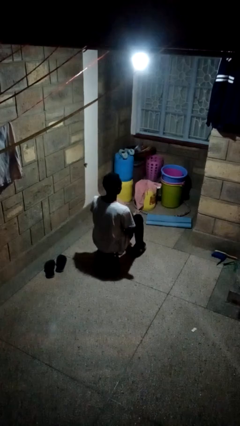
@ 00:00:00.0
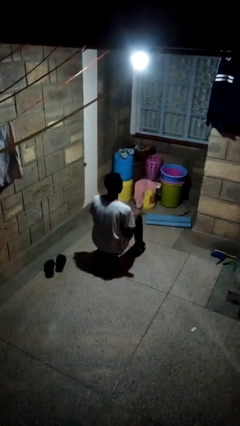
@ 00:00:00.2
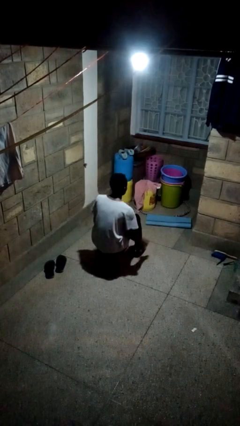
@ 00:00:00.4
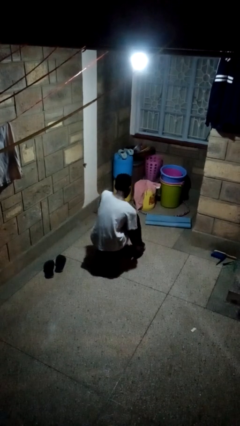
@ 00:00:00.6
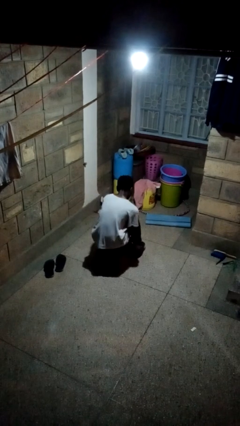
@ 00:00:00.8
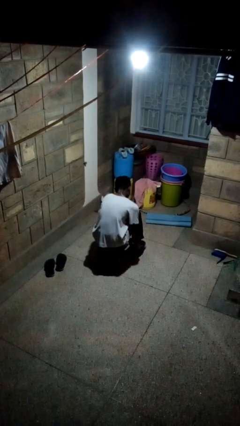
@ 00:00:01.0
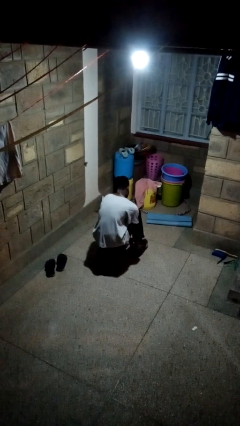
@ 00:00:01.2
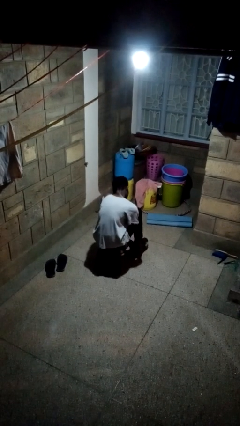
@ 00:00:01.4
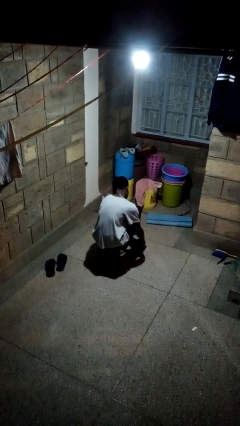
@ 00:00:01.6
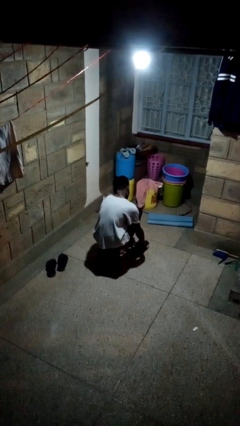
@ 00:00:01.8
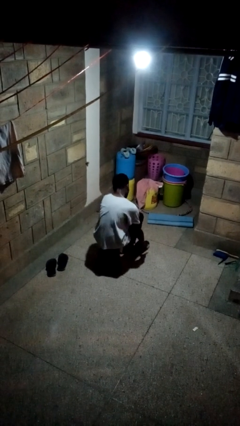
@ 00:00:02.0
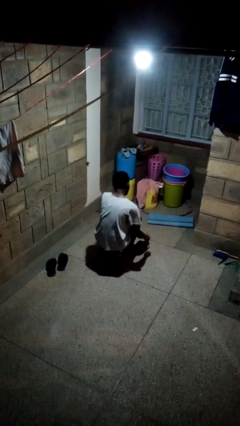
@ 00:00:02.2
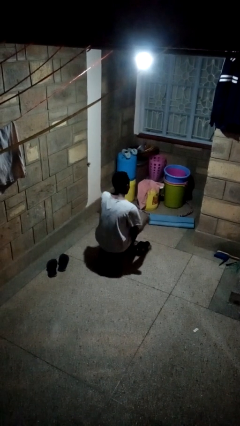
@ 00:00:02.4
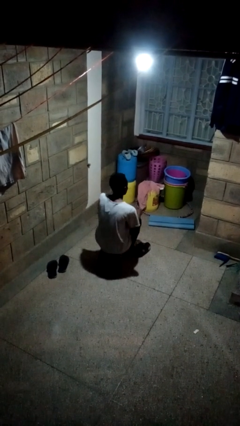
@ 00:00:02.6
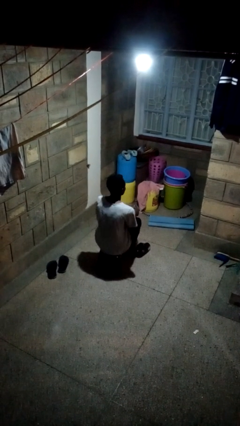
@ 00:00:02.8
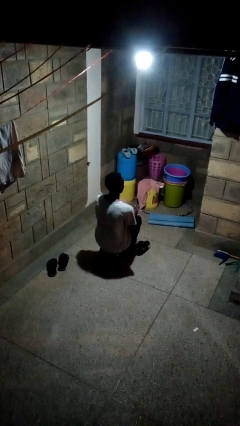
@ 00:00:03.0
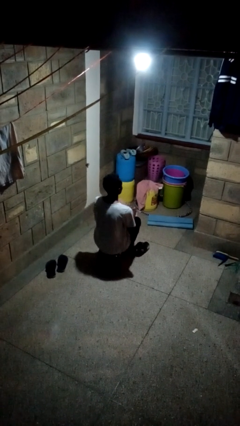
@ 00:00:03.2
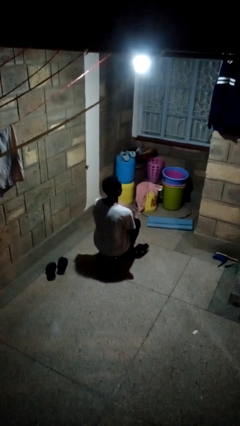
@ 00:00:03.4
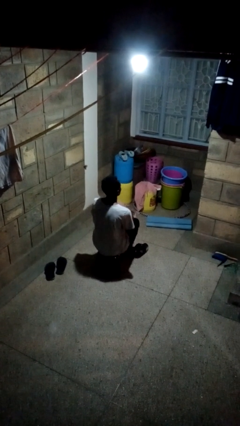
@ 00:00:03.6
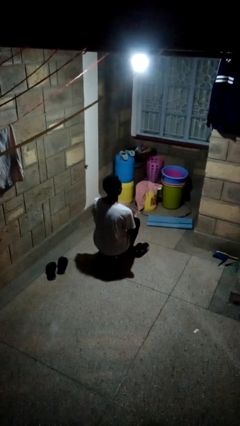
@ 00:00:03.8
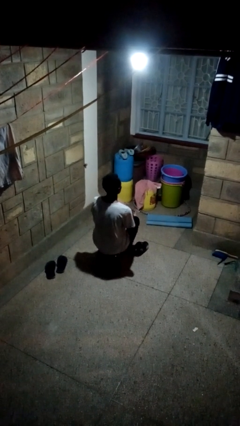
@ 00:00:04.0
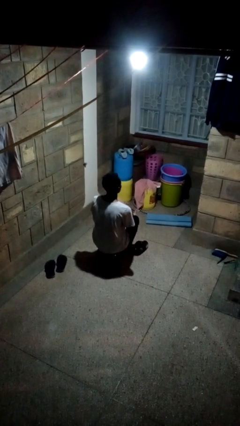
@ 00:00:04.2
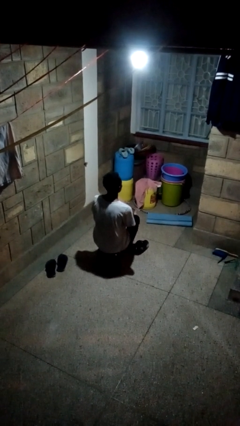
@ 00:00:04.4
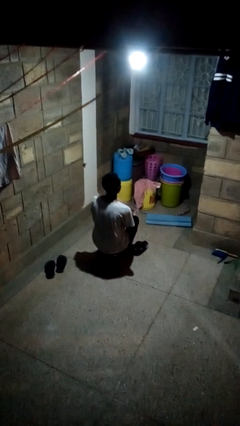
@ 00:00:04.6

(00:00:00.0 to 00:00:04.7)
person takes off shoes

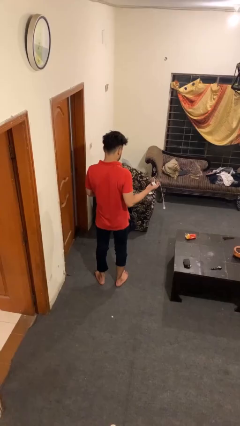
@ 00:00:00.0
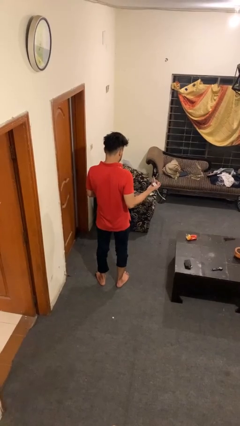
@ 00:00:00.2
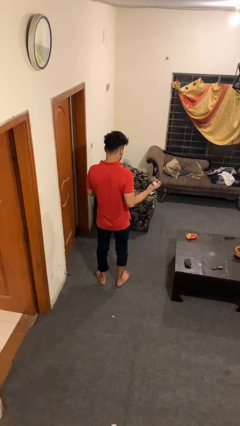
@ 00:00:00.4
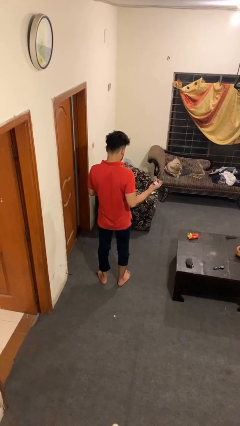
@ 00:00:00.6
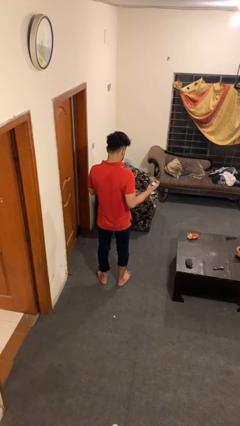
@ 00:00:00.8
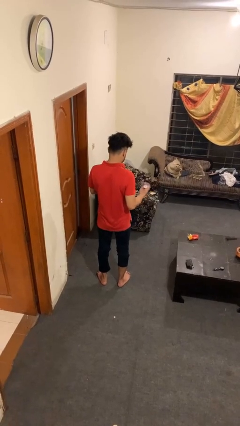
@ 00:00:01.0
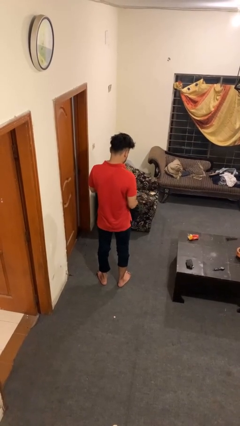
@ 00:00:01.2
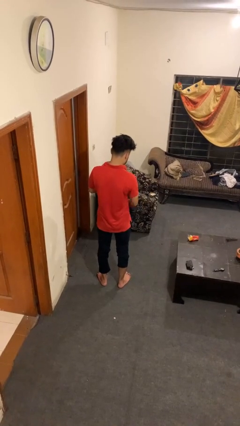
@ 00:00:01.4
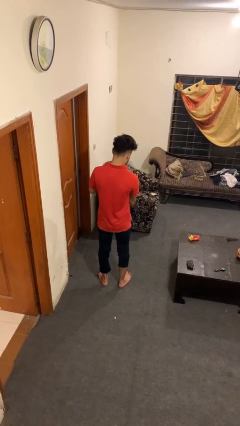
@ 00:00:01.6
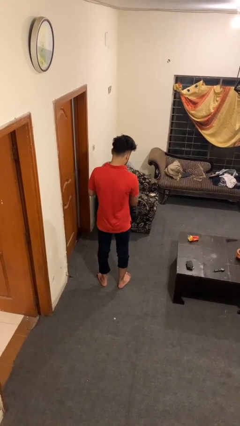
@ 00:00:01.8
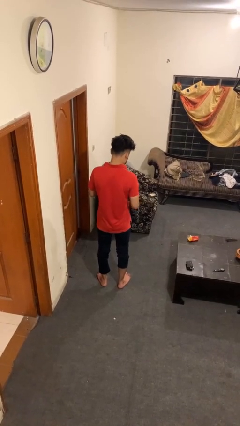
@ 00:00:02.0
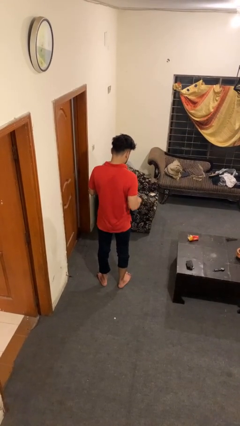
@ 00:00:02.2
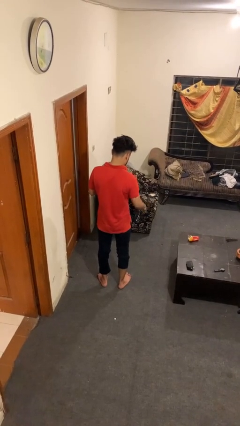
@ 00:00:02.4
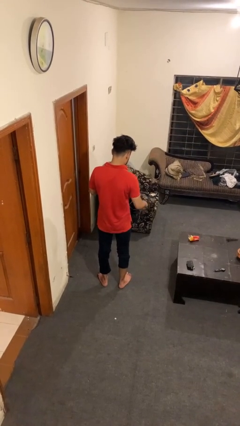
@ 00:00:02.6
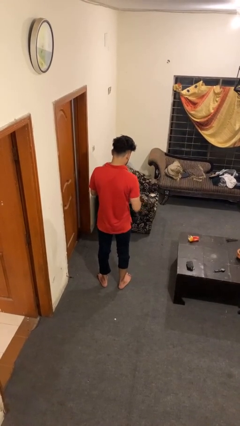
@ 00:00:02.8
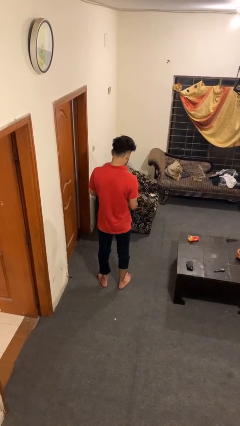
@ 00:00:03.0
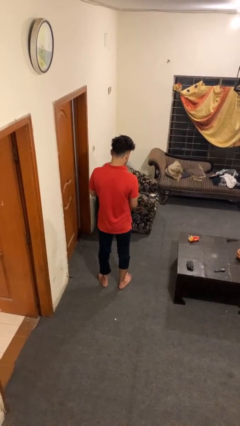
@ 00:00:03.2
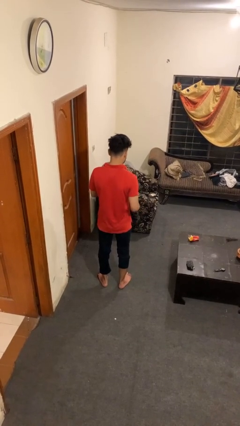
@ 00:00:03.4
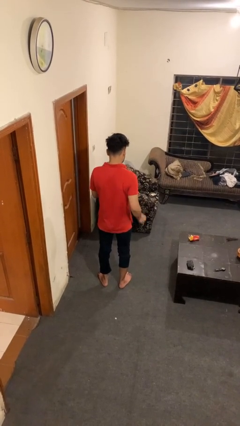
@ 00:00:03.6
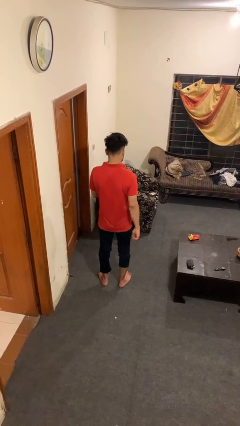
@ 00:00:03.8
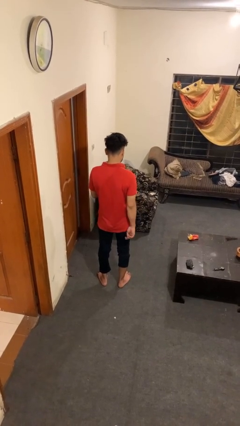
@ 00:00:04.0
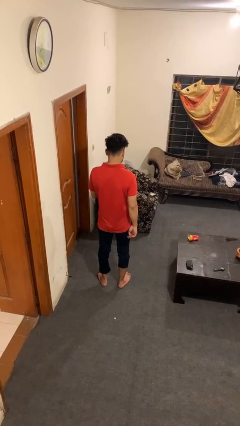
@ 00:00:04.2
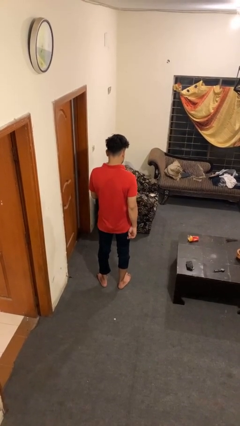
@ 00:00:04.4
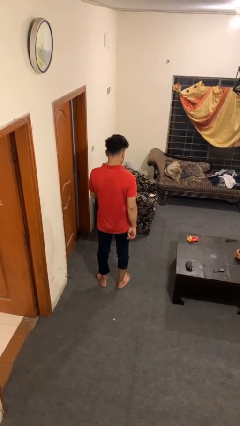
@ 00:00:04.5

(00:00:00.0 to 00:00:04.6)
person puts object into bag

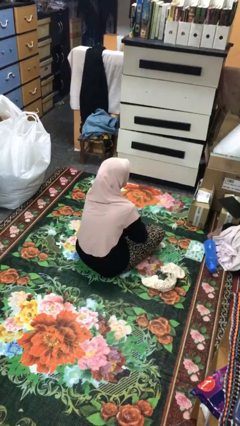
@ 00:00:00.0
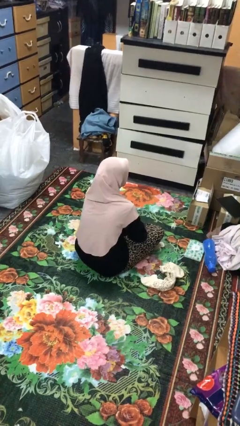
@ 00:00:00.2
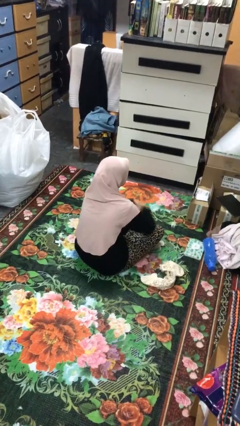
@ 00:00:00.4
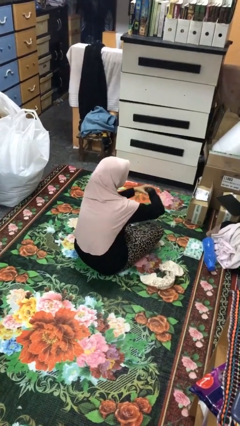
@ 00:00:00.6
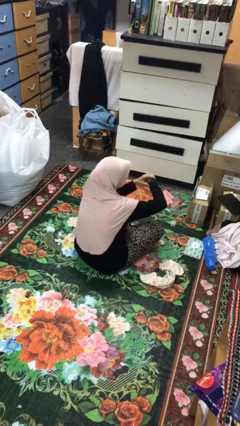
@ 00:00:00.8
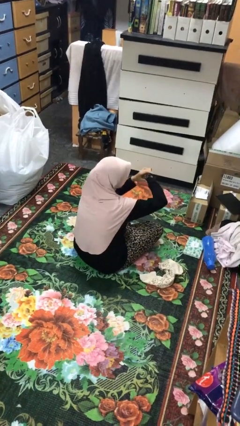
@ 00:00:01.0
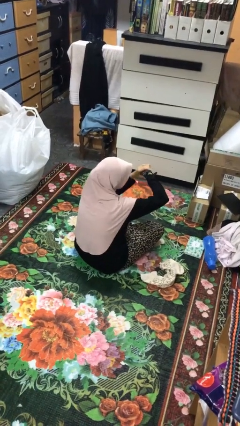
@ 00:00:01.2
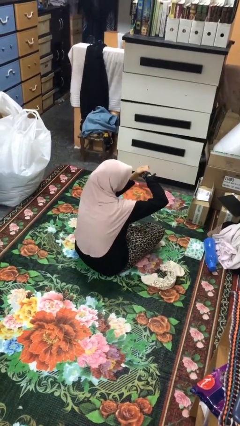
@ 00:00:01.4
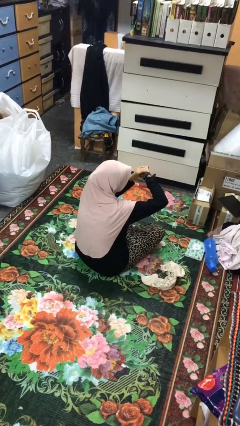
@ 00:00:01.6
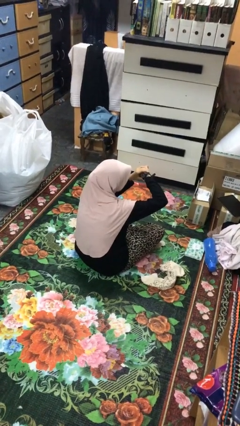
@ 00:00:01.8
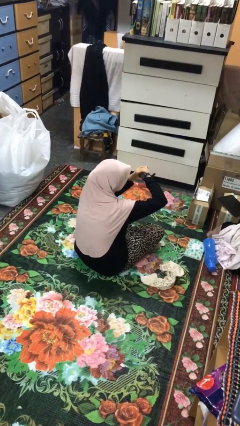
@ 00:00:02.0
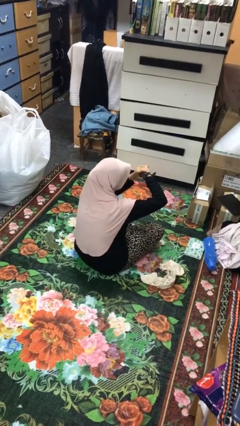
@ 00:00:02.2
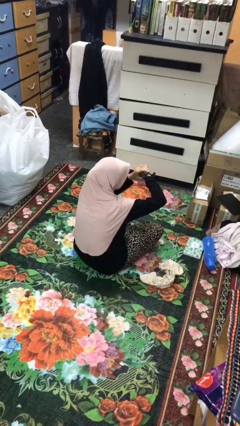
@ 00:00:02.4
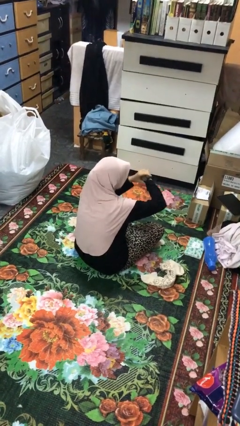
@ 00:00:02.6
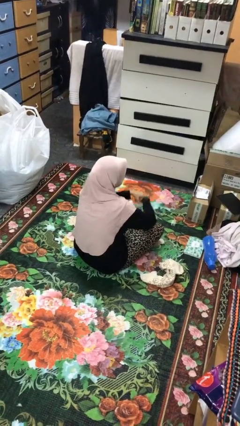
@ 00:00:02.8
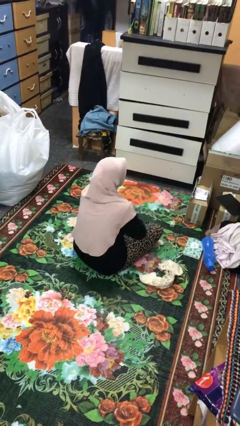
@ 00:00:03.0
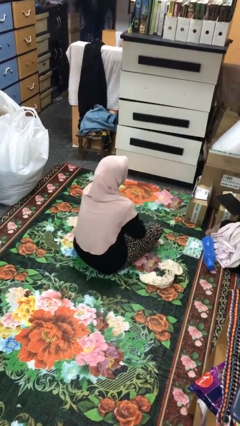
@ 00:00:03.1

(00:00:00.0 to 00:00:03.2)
person looks at wristwatch

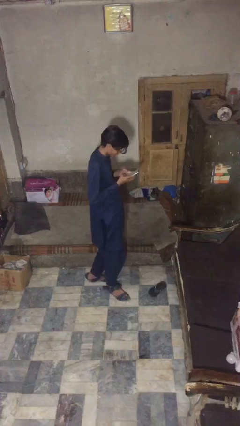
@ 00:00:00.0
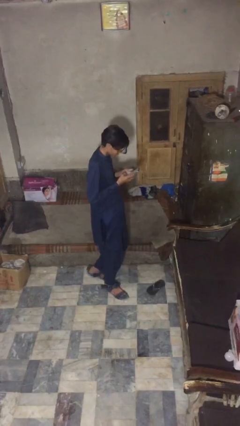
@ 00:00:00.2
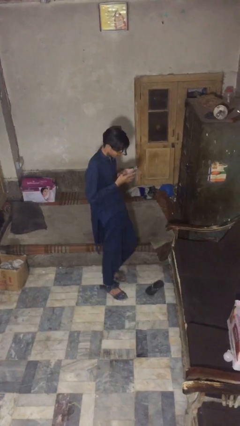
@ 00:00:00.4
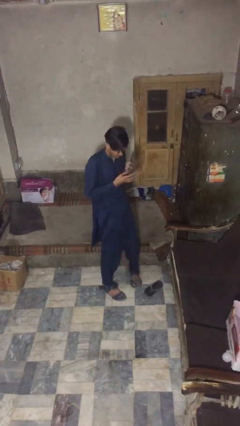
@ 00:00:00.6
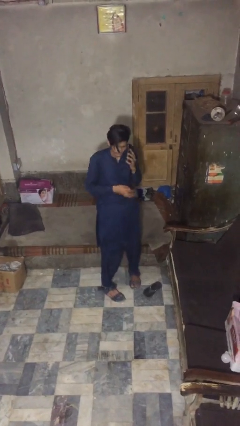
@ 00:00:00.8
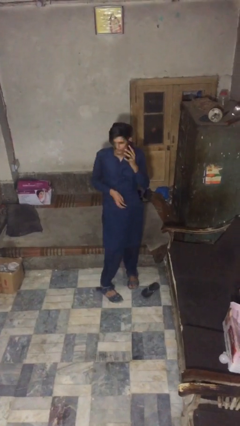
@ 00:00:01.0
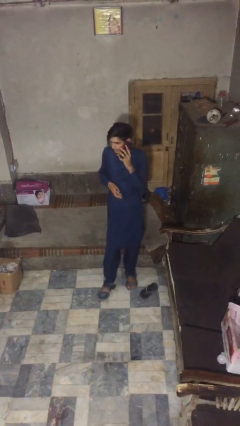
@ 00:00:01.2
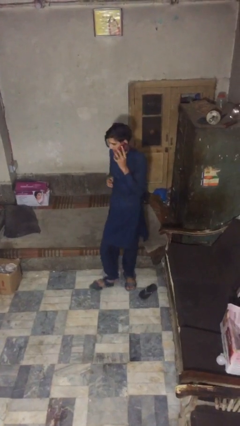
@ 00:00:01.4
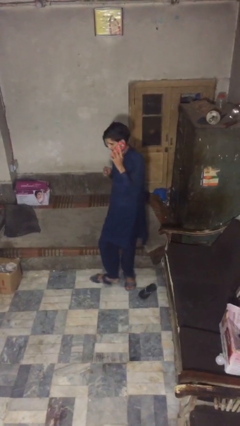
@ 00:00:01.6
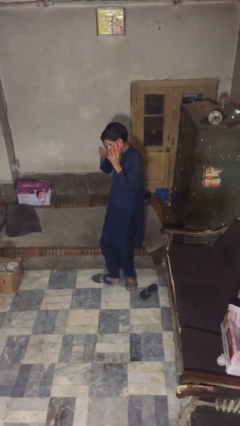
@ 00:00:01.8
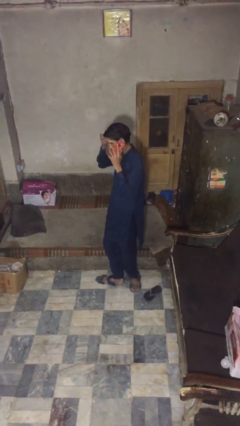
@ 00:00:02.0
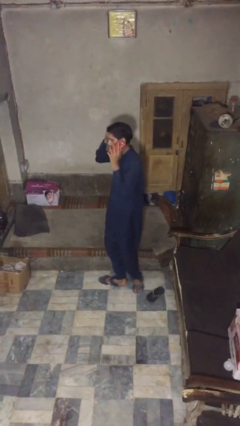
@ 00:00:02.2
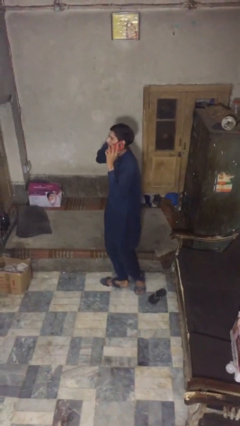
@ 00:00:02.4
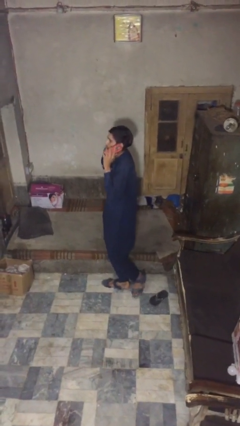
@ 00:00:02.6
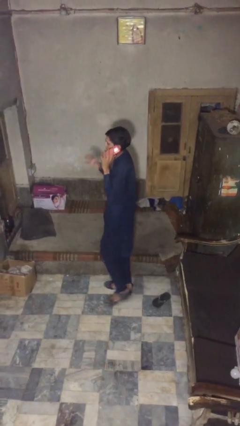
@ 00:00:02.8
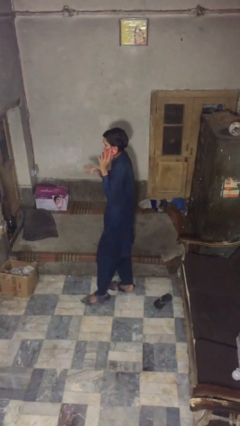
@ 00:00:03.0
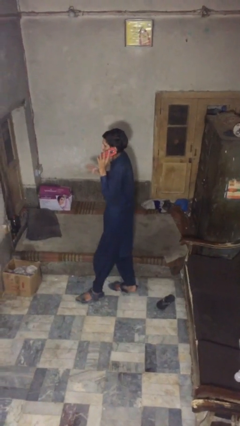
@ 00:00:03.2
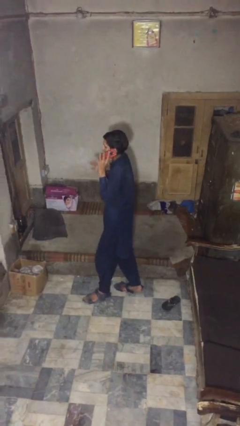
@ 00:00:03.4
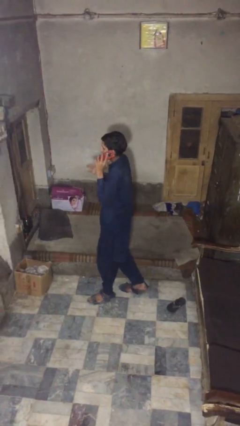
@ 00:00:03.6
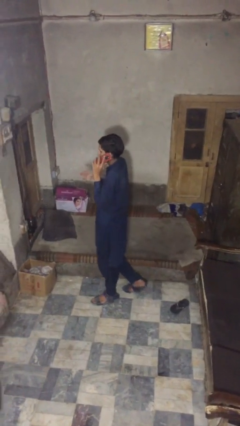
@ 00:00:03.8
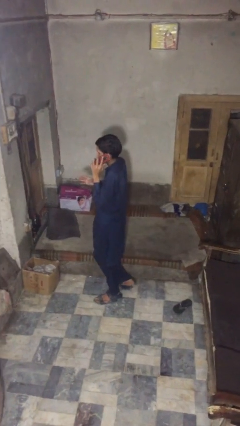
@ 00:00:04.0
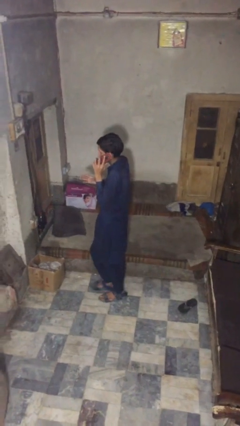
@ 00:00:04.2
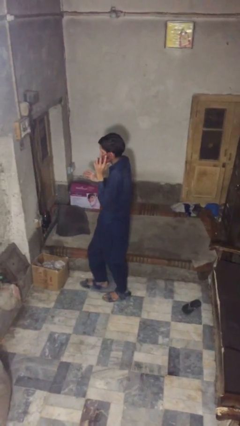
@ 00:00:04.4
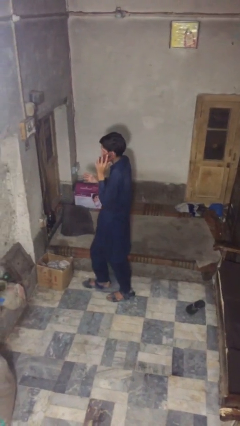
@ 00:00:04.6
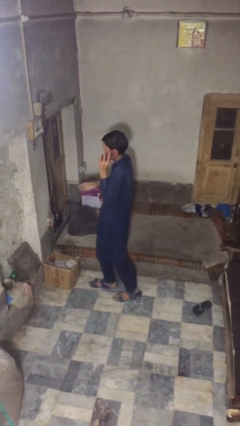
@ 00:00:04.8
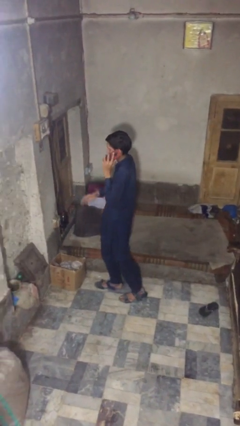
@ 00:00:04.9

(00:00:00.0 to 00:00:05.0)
person talks on phone

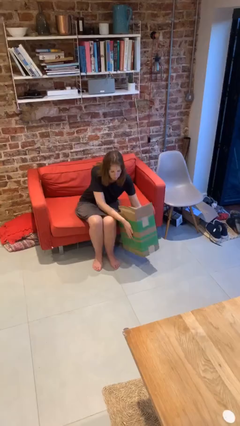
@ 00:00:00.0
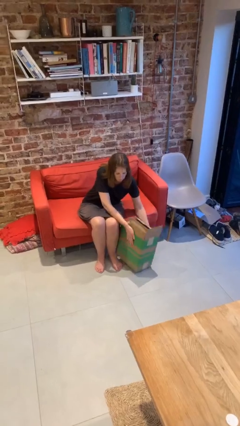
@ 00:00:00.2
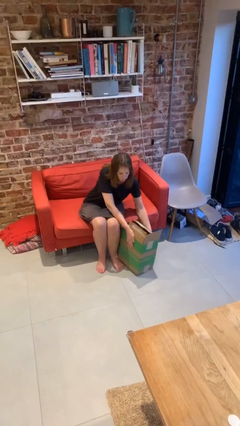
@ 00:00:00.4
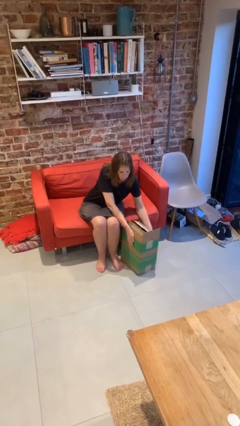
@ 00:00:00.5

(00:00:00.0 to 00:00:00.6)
person puts down object on floor
